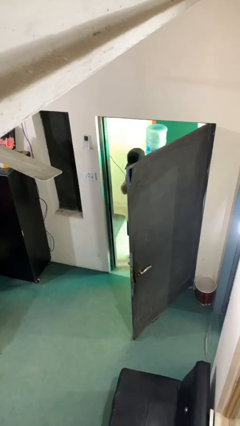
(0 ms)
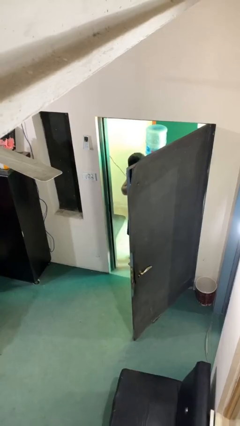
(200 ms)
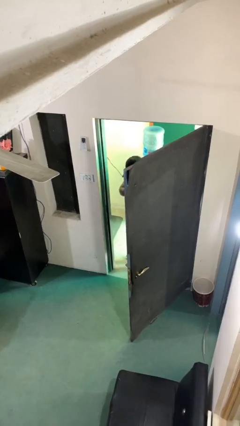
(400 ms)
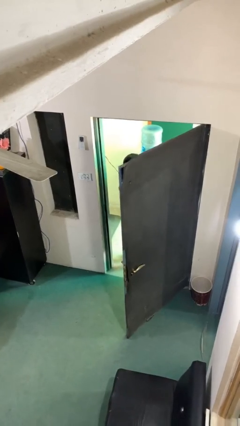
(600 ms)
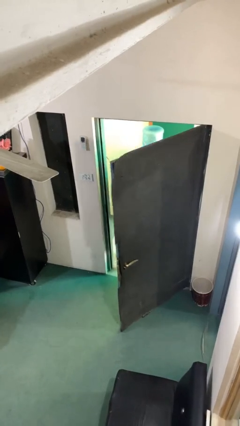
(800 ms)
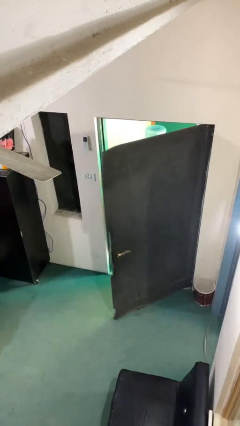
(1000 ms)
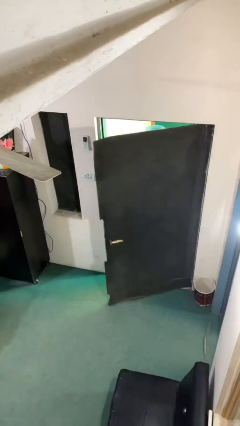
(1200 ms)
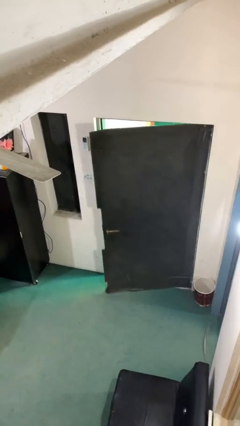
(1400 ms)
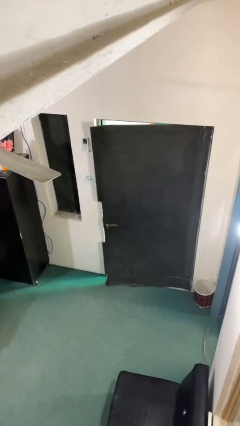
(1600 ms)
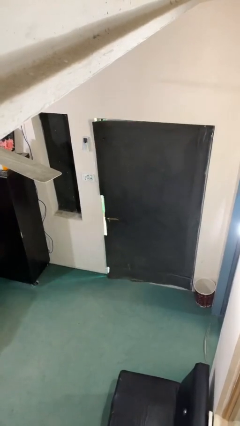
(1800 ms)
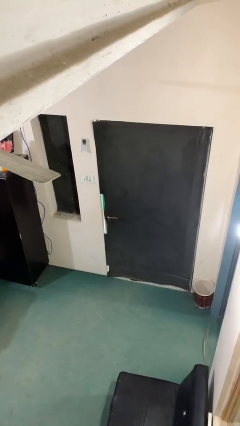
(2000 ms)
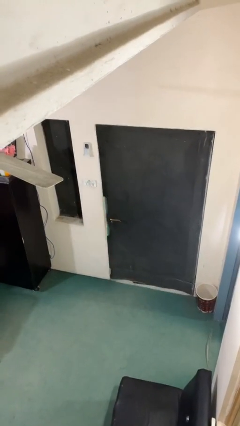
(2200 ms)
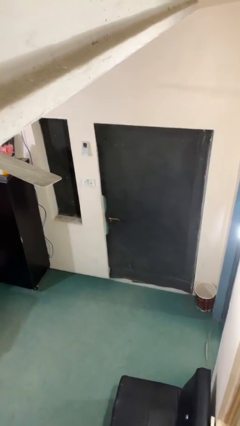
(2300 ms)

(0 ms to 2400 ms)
person closes facility door

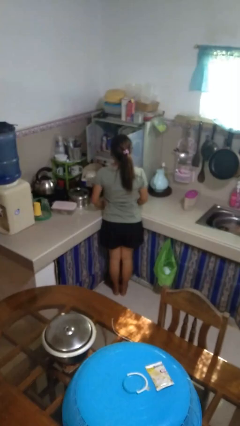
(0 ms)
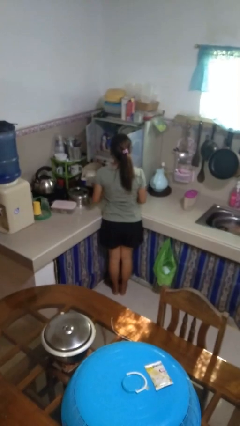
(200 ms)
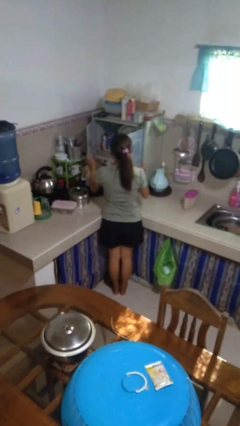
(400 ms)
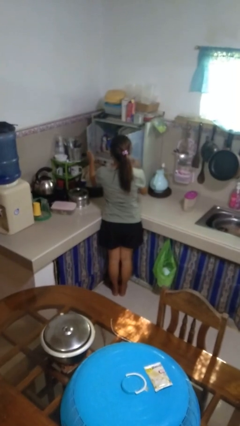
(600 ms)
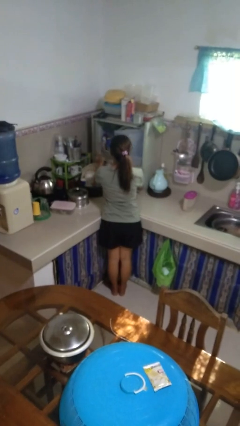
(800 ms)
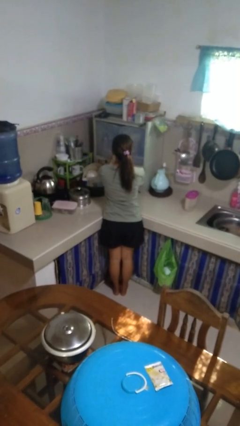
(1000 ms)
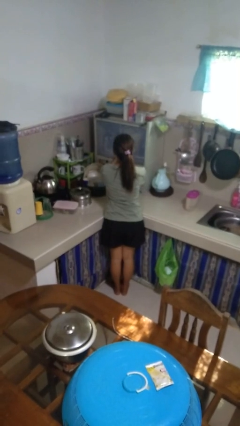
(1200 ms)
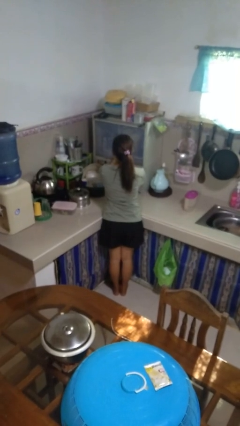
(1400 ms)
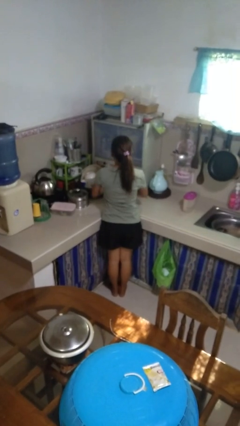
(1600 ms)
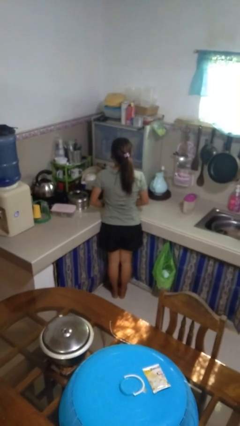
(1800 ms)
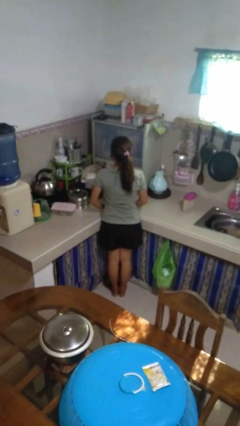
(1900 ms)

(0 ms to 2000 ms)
person closes kitchen drawer

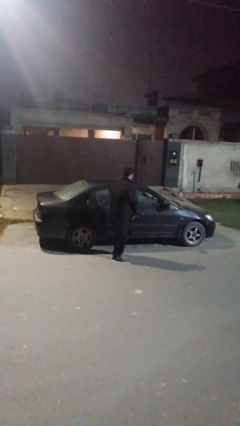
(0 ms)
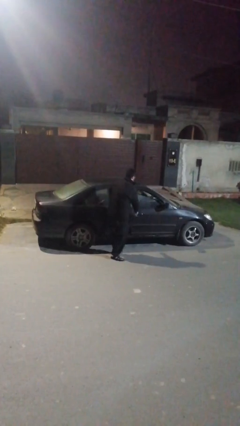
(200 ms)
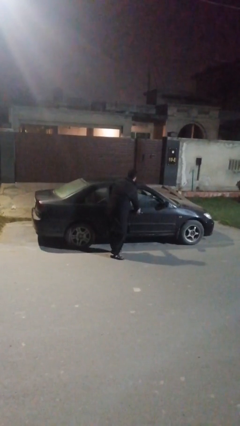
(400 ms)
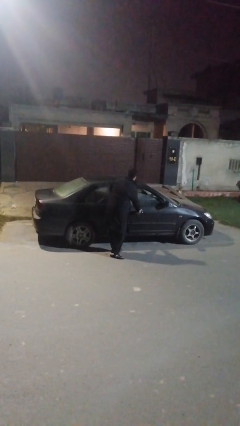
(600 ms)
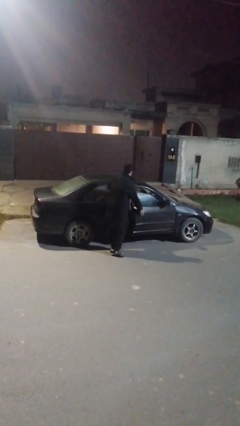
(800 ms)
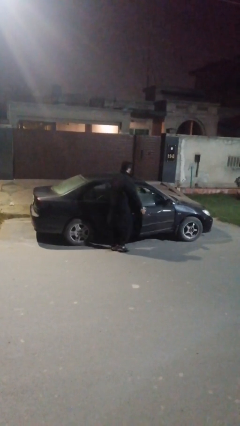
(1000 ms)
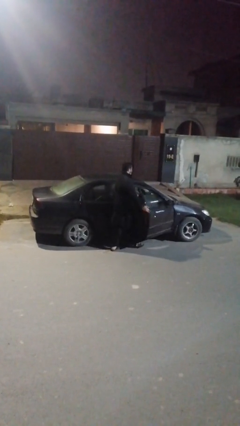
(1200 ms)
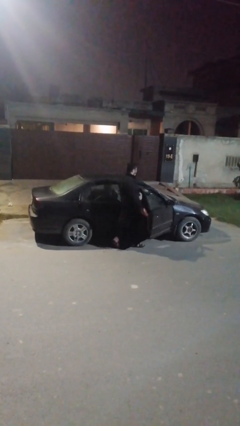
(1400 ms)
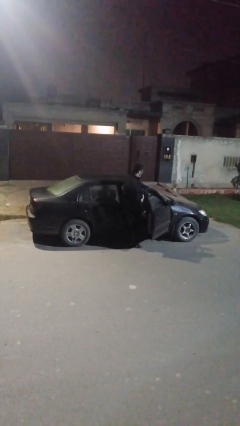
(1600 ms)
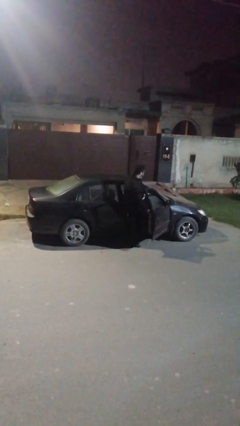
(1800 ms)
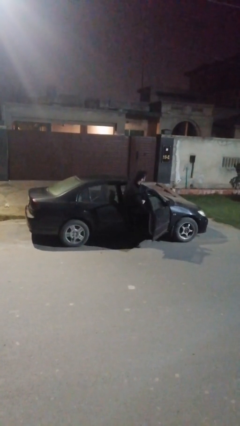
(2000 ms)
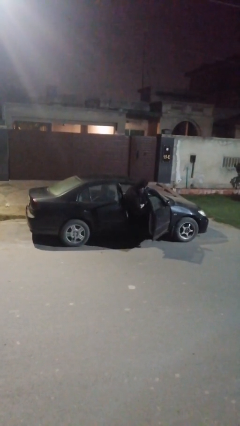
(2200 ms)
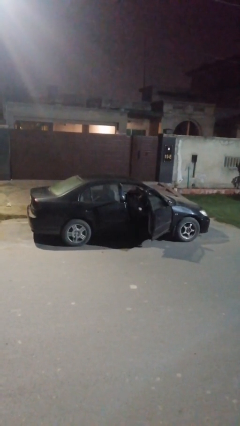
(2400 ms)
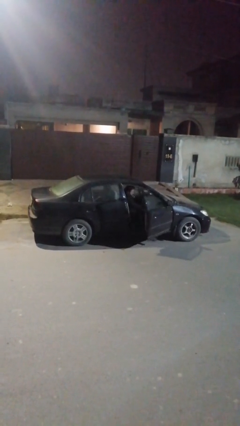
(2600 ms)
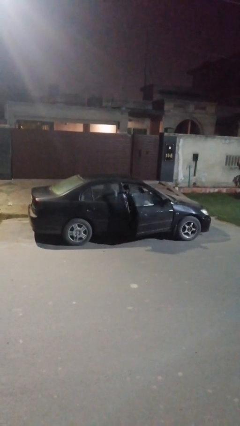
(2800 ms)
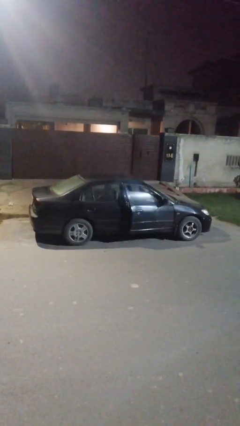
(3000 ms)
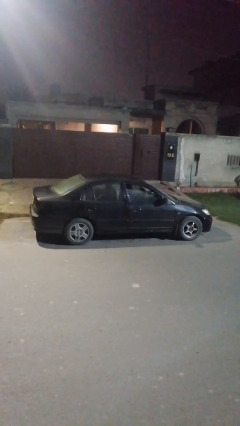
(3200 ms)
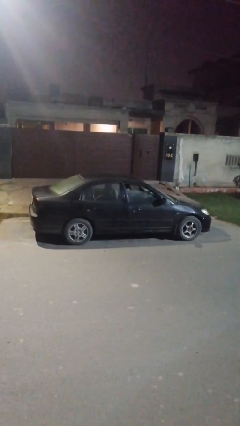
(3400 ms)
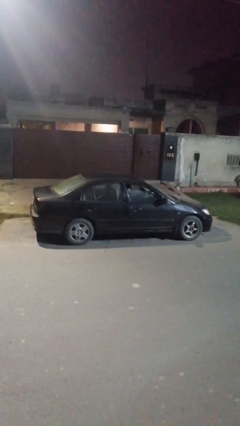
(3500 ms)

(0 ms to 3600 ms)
car picks up person

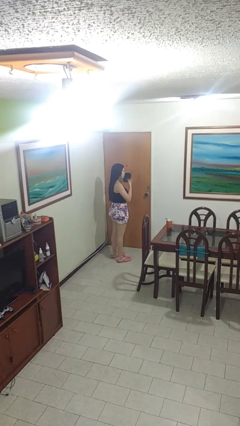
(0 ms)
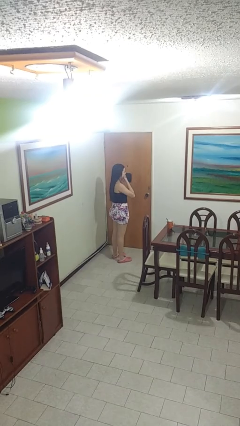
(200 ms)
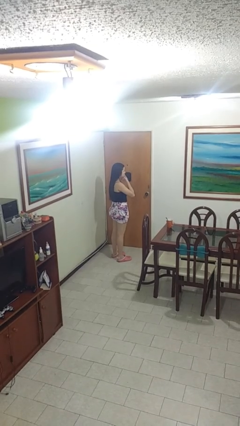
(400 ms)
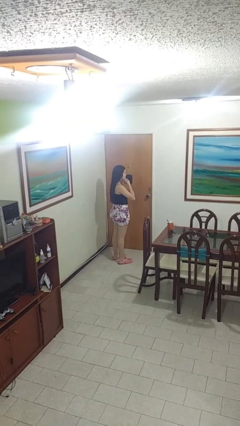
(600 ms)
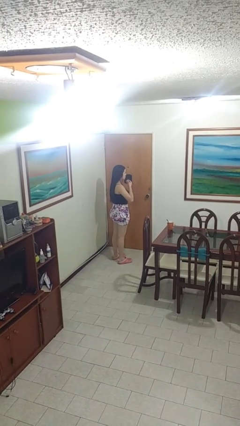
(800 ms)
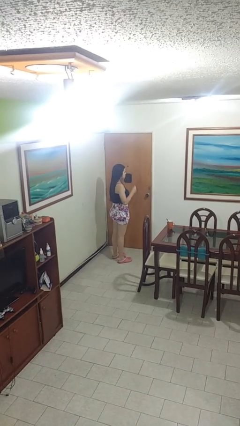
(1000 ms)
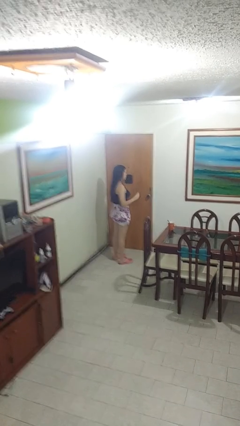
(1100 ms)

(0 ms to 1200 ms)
person strokes chin

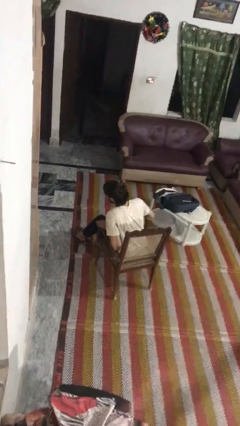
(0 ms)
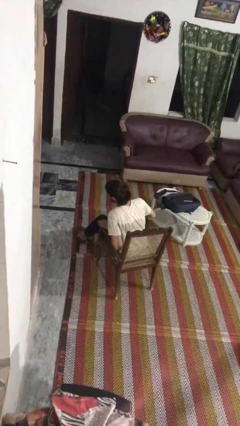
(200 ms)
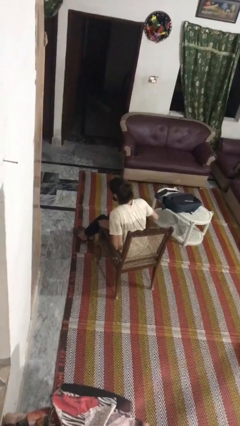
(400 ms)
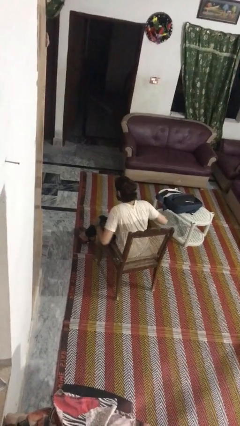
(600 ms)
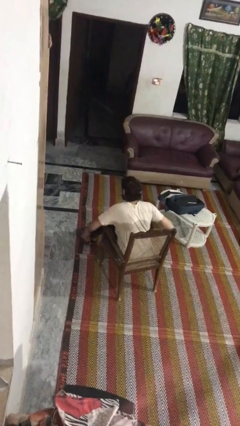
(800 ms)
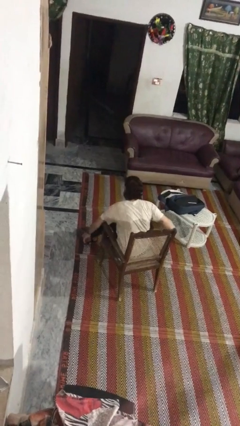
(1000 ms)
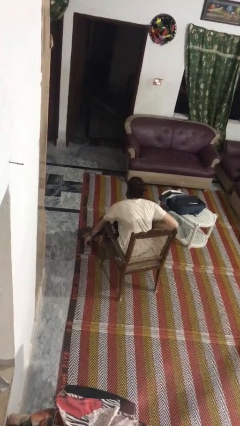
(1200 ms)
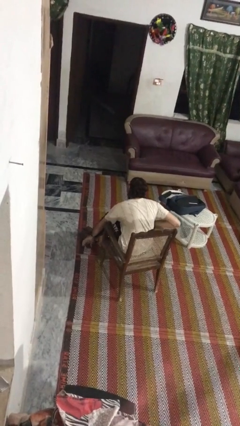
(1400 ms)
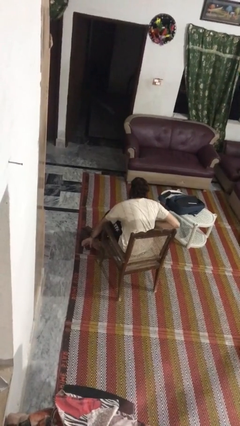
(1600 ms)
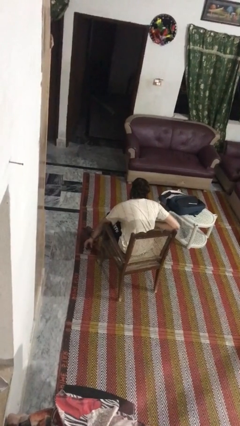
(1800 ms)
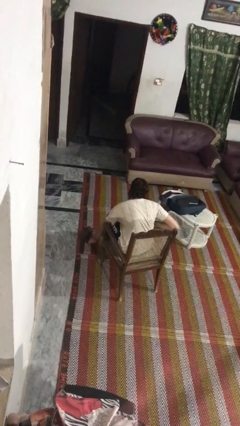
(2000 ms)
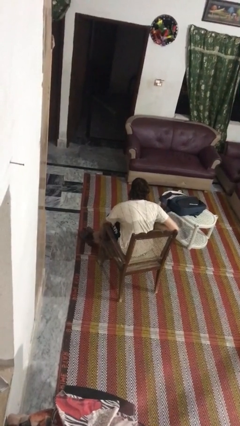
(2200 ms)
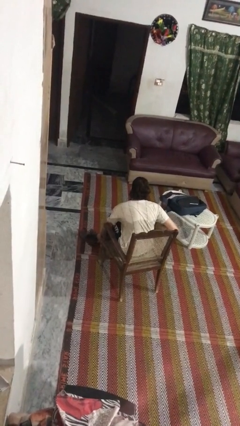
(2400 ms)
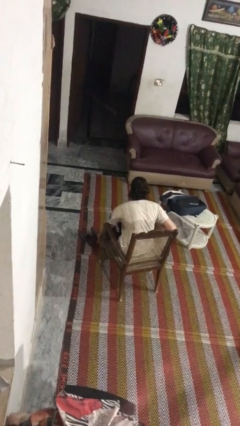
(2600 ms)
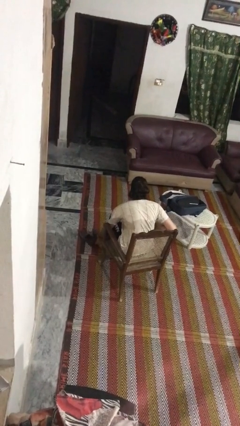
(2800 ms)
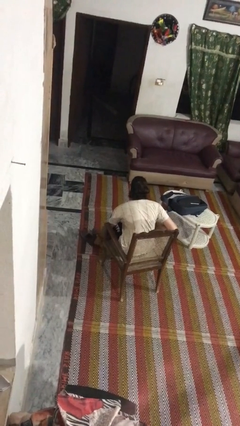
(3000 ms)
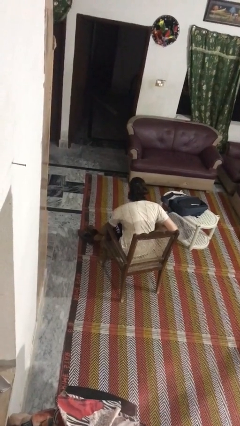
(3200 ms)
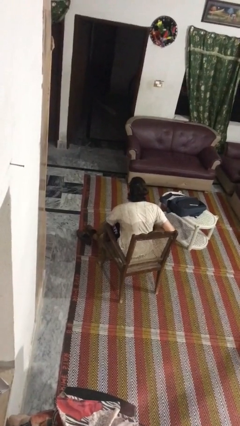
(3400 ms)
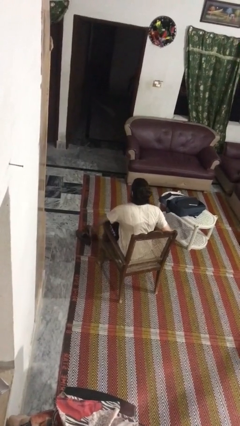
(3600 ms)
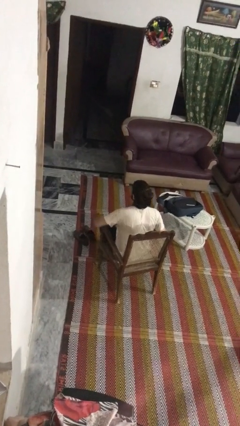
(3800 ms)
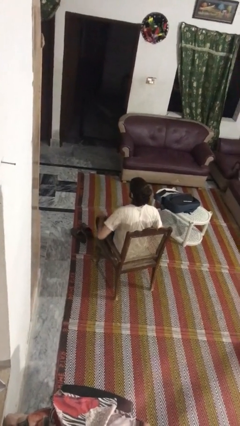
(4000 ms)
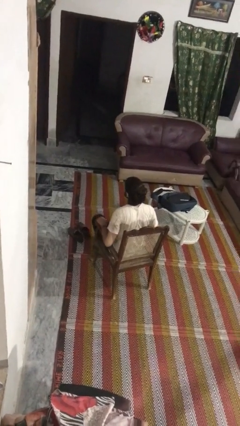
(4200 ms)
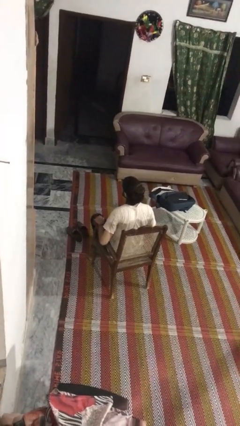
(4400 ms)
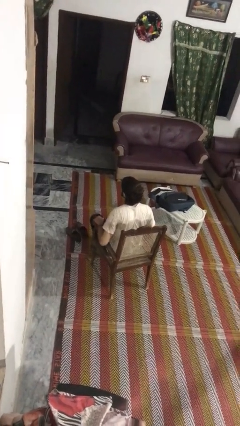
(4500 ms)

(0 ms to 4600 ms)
person takes off shoes

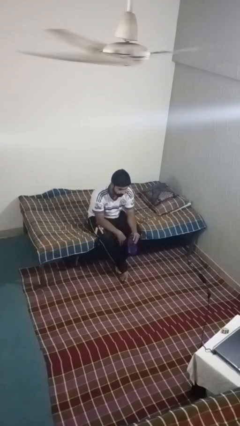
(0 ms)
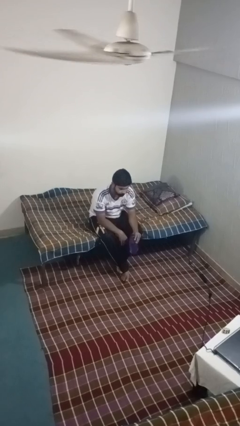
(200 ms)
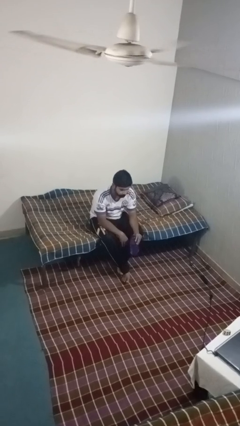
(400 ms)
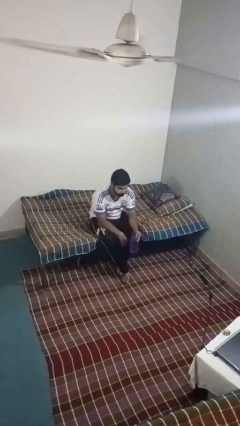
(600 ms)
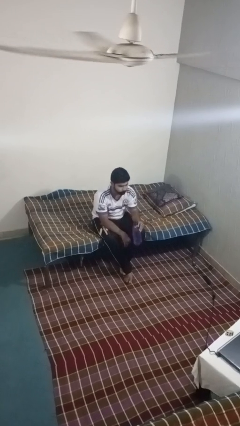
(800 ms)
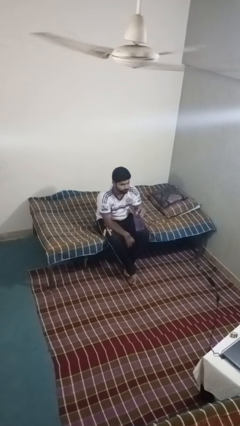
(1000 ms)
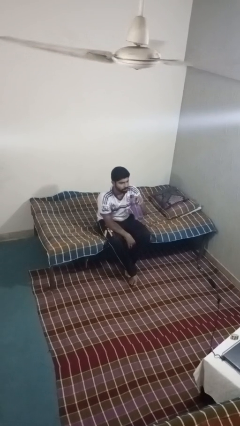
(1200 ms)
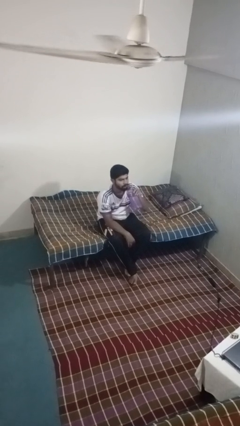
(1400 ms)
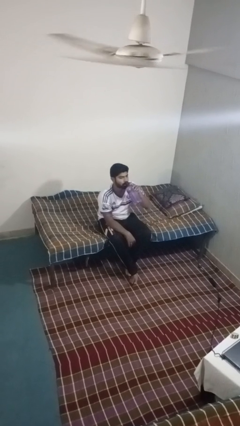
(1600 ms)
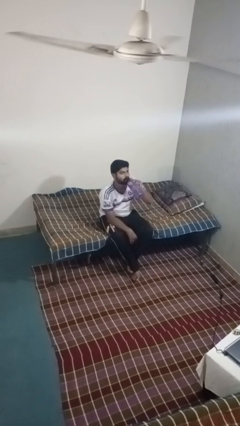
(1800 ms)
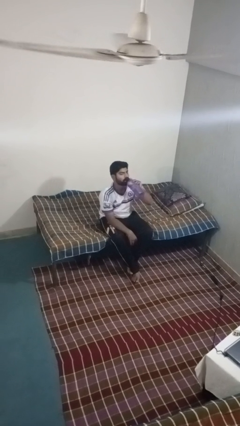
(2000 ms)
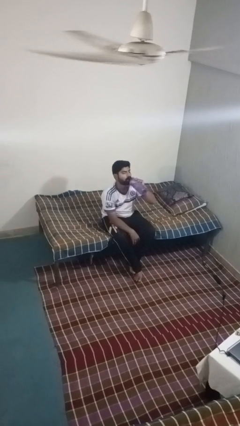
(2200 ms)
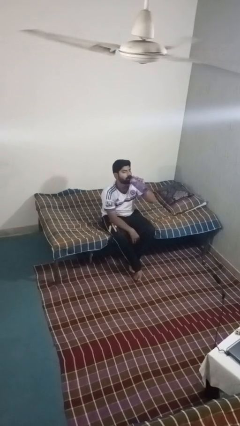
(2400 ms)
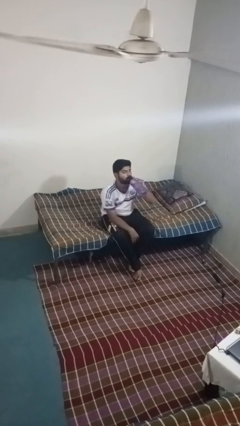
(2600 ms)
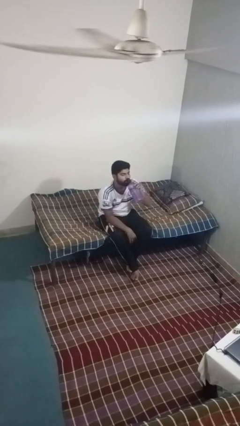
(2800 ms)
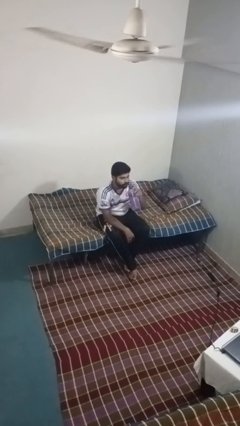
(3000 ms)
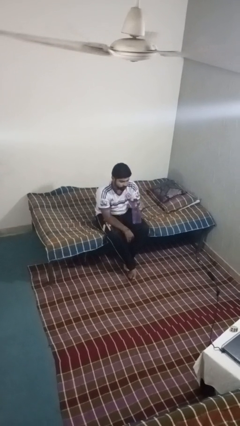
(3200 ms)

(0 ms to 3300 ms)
person drinks from bottle

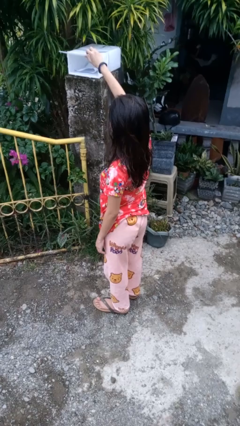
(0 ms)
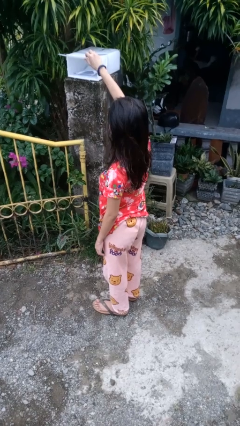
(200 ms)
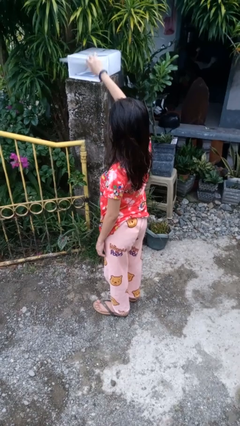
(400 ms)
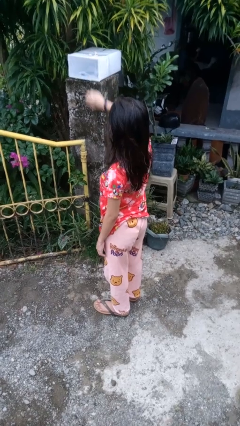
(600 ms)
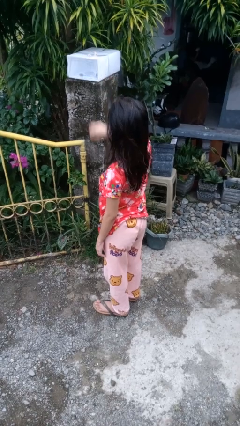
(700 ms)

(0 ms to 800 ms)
person closes mailbox
